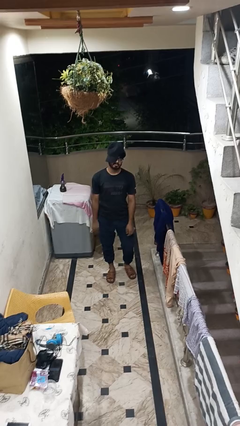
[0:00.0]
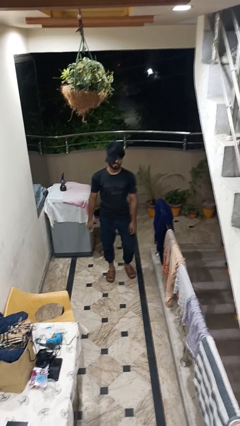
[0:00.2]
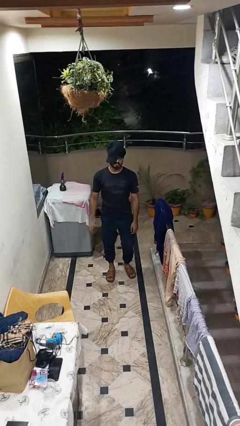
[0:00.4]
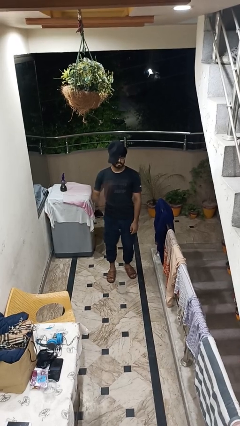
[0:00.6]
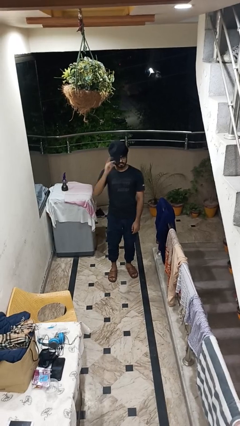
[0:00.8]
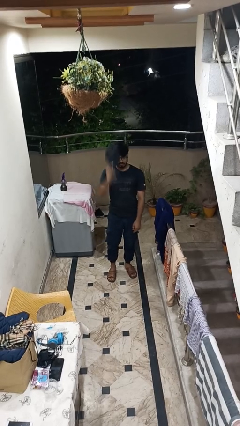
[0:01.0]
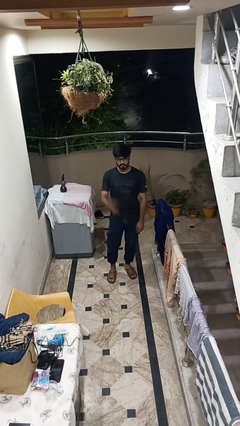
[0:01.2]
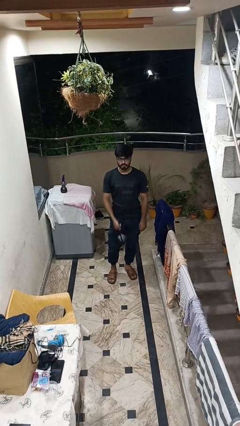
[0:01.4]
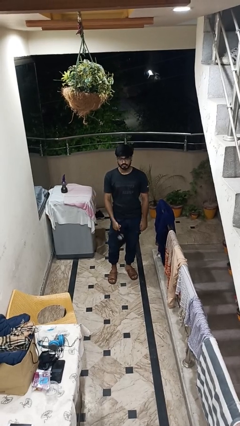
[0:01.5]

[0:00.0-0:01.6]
person takes off hat

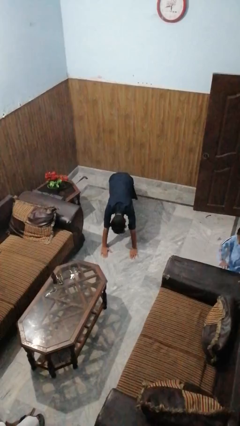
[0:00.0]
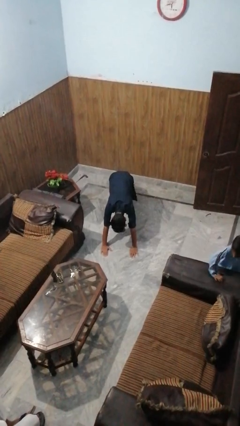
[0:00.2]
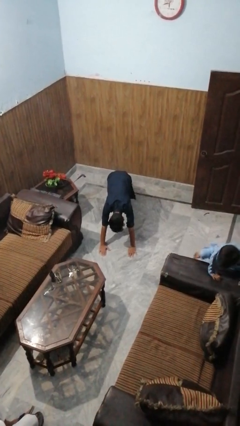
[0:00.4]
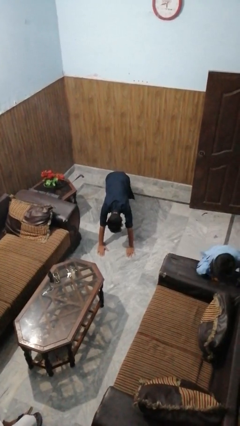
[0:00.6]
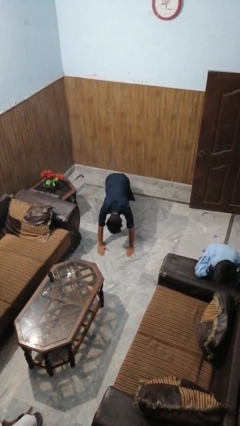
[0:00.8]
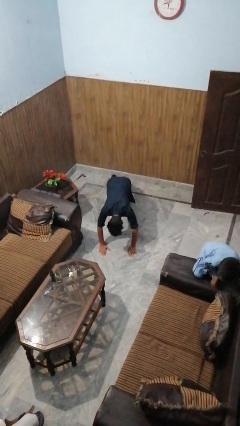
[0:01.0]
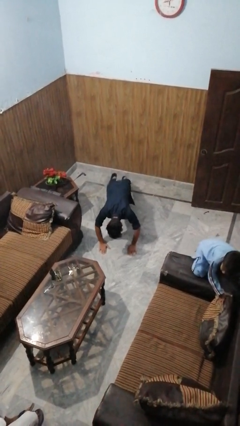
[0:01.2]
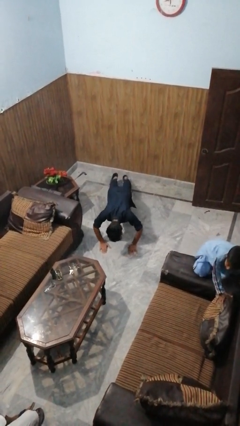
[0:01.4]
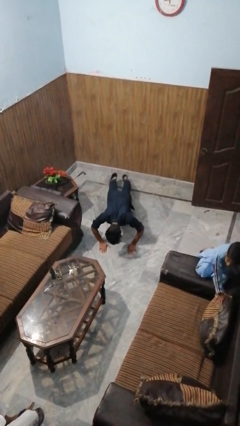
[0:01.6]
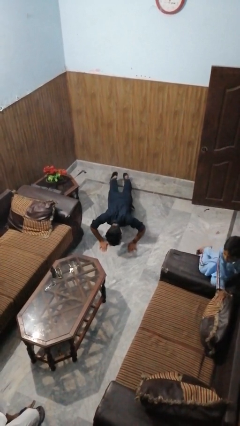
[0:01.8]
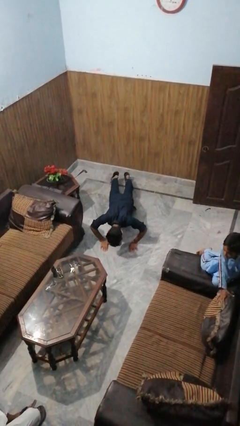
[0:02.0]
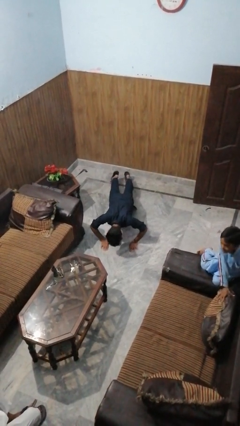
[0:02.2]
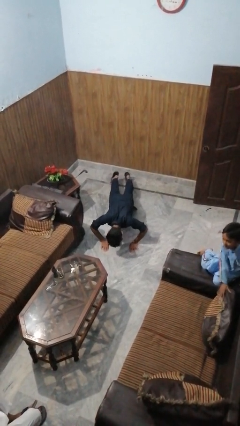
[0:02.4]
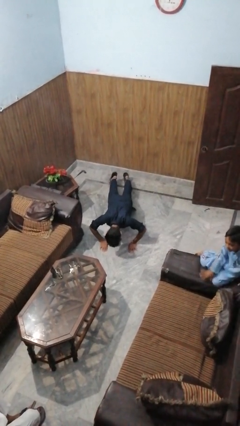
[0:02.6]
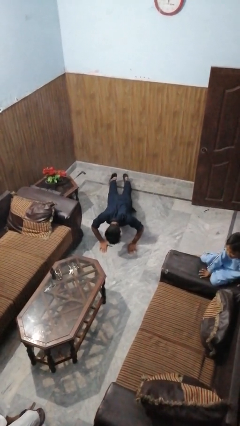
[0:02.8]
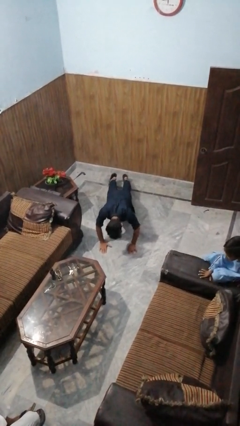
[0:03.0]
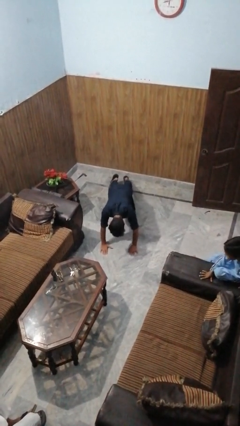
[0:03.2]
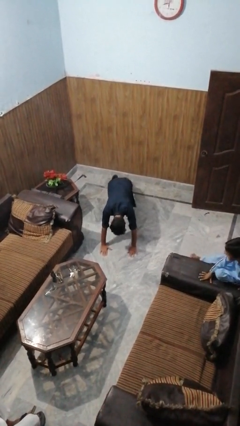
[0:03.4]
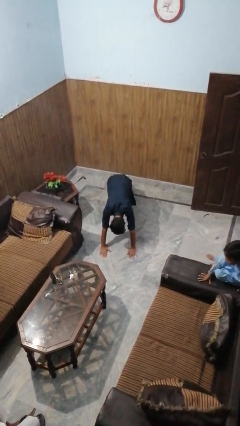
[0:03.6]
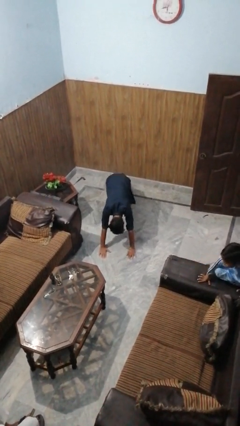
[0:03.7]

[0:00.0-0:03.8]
person exercises with pushup

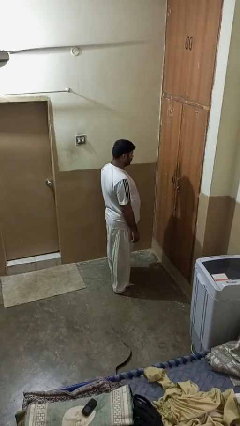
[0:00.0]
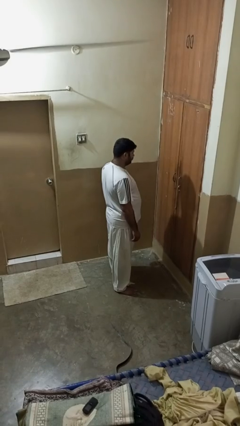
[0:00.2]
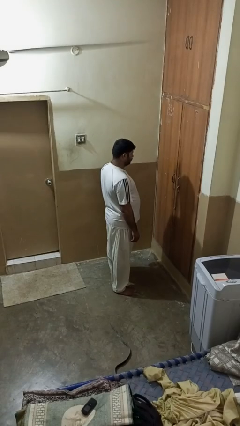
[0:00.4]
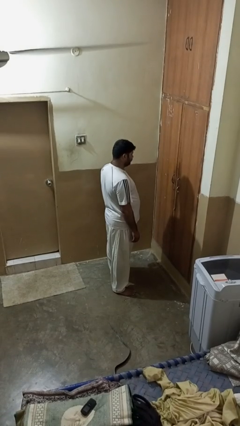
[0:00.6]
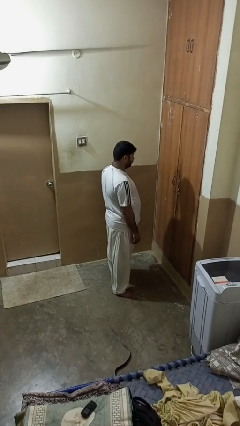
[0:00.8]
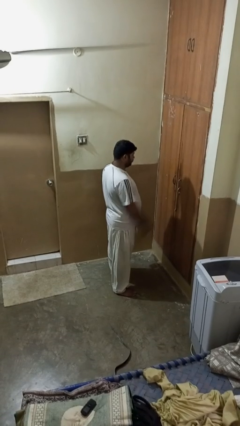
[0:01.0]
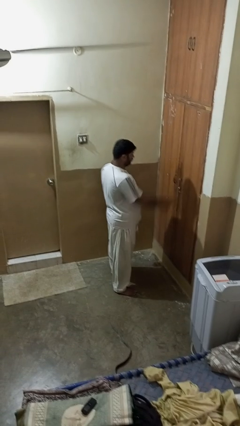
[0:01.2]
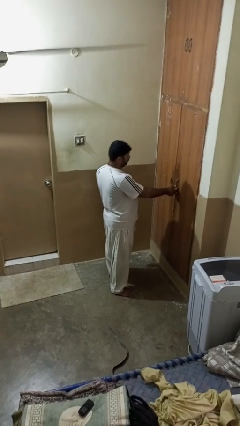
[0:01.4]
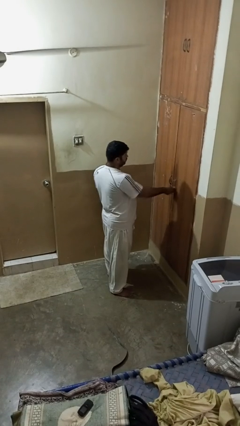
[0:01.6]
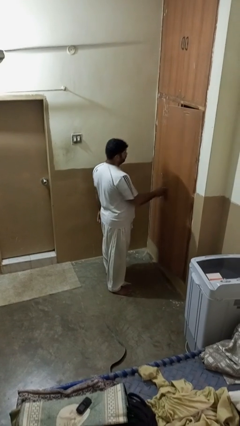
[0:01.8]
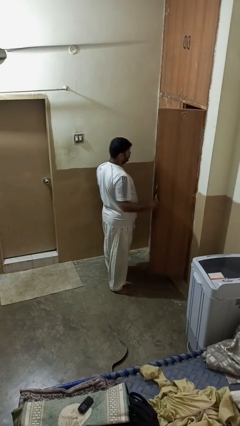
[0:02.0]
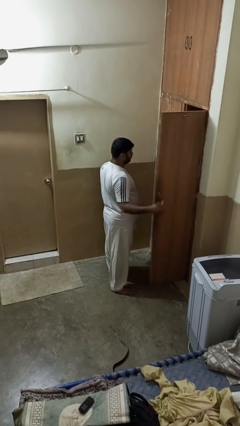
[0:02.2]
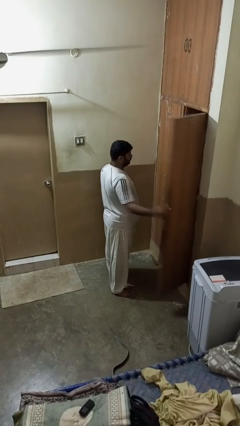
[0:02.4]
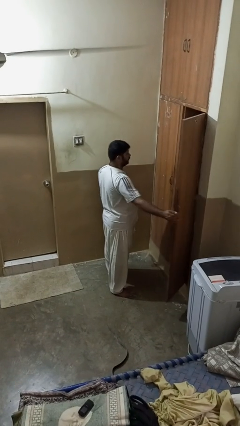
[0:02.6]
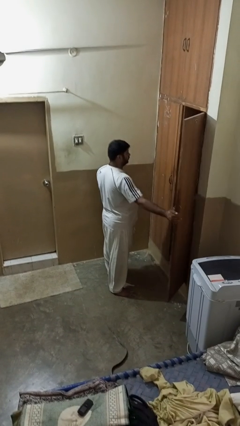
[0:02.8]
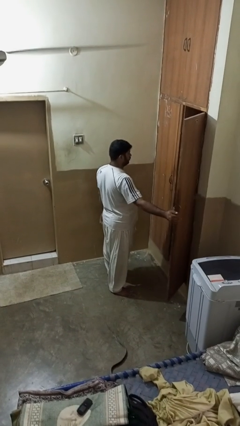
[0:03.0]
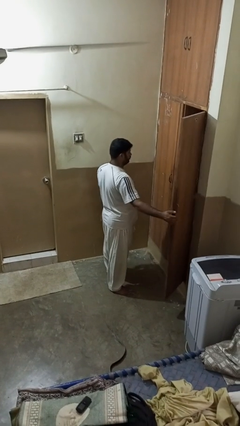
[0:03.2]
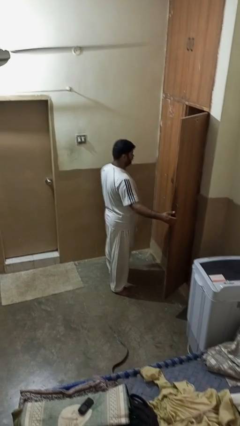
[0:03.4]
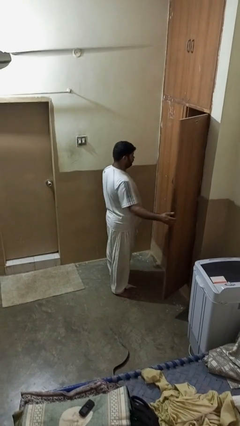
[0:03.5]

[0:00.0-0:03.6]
person opens closet door

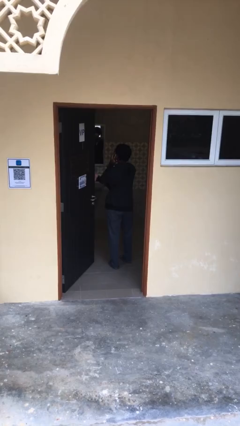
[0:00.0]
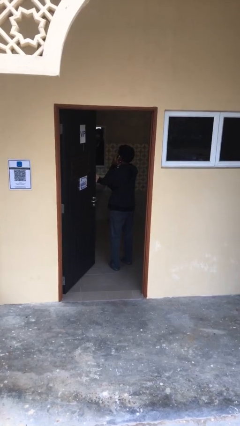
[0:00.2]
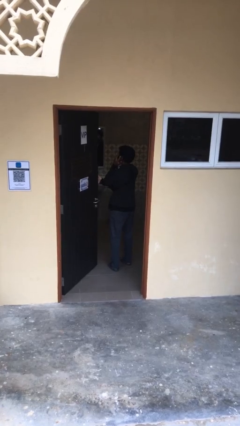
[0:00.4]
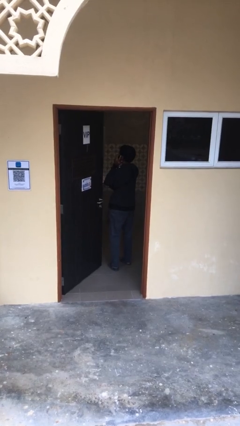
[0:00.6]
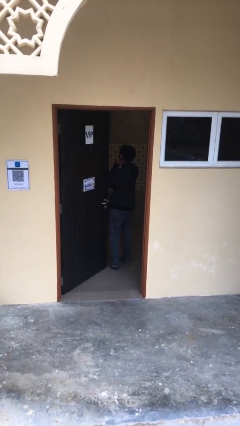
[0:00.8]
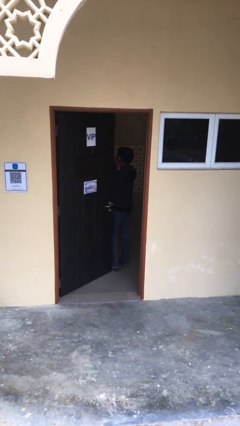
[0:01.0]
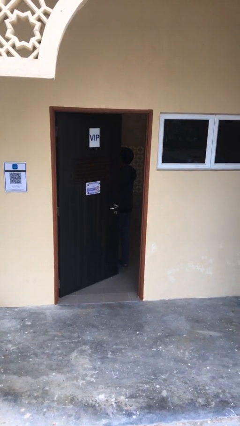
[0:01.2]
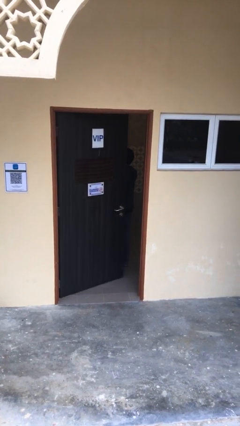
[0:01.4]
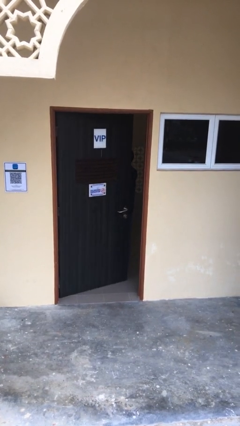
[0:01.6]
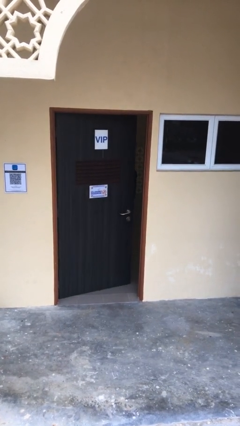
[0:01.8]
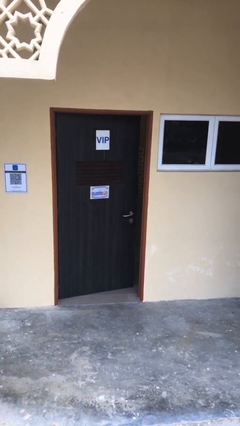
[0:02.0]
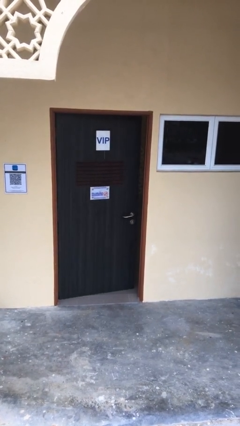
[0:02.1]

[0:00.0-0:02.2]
person closes facility door

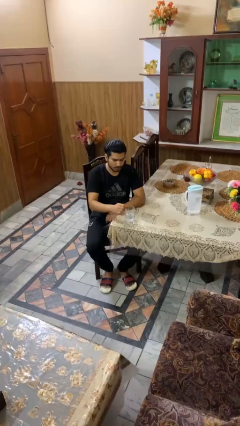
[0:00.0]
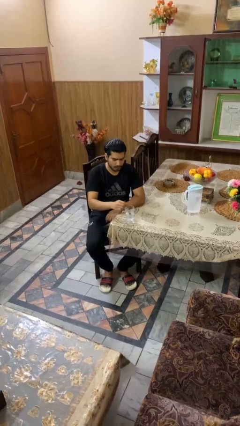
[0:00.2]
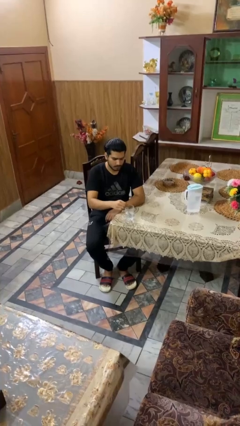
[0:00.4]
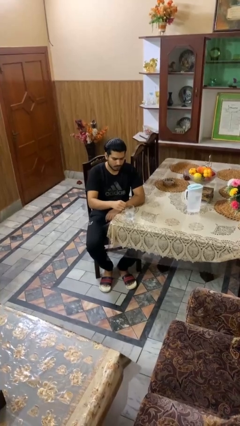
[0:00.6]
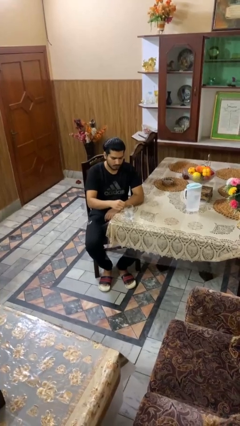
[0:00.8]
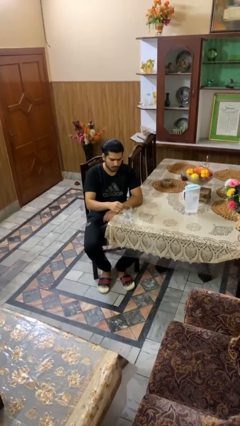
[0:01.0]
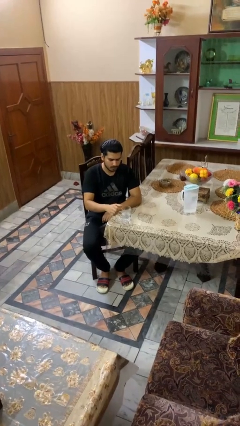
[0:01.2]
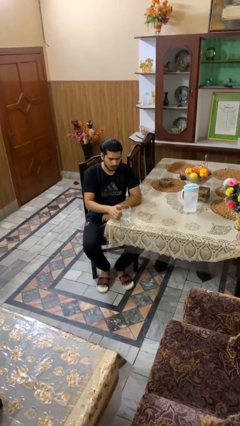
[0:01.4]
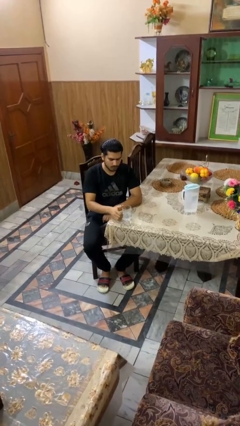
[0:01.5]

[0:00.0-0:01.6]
person stirs mug

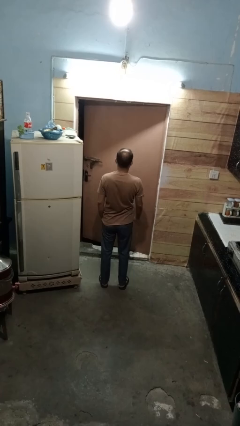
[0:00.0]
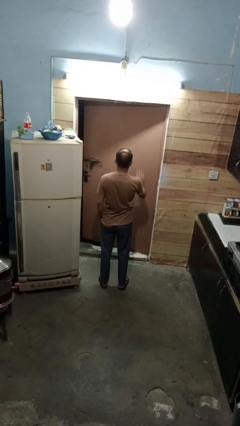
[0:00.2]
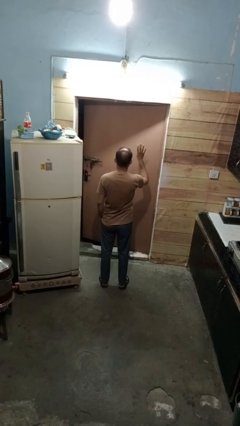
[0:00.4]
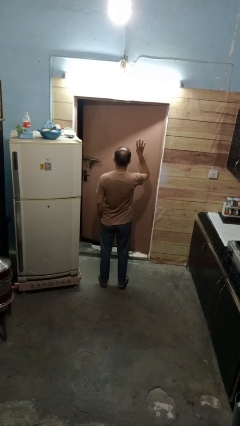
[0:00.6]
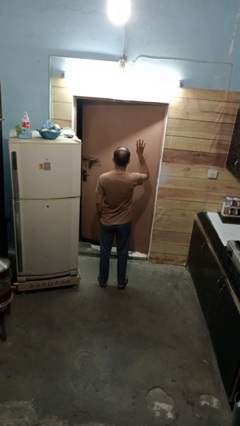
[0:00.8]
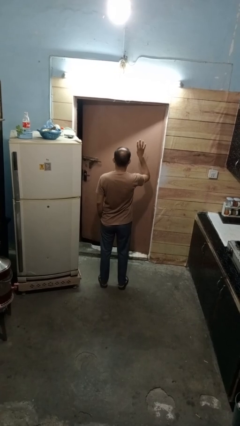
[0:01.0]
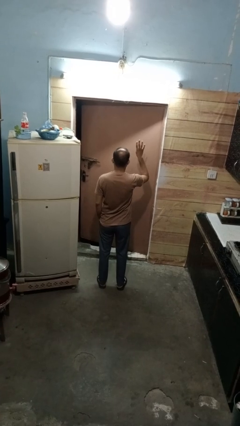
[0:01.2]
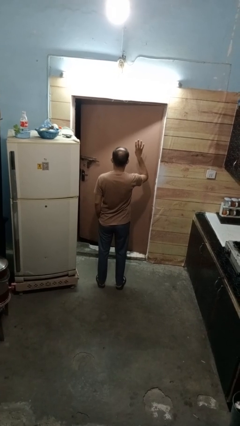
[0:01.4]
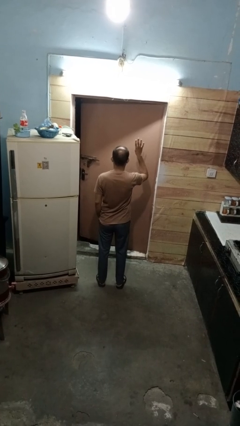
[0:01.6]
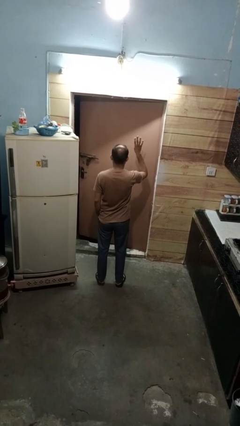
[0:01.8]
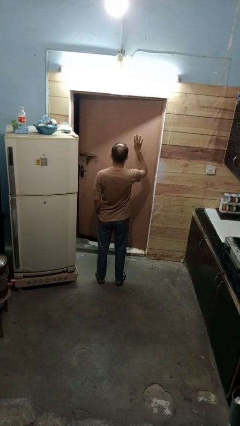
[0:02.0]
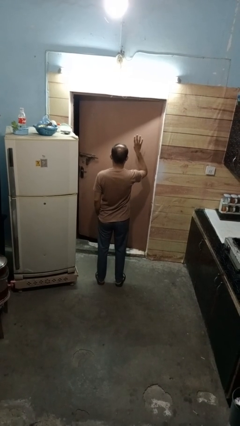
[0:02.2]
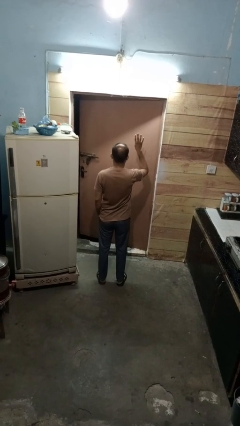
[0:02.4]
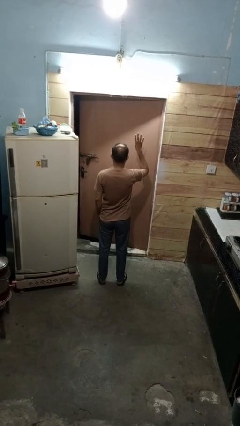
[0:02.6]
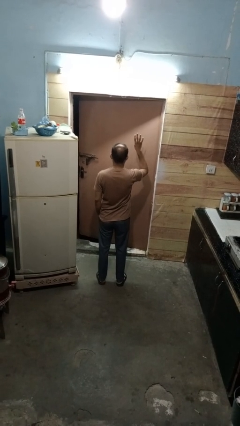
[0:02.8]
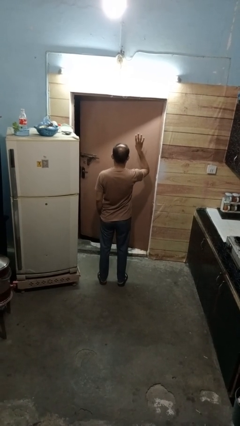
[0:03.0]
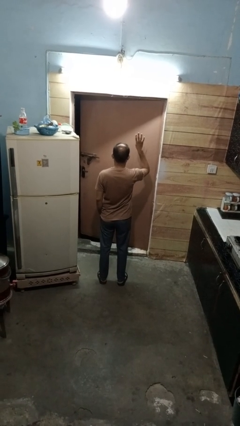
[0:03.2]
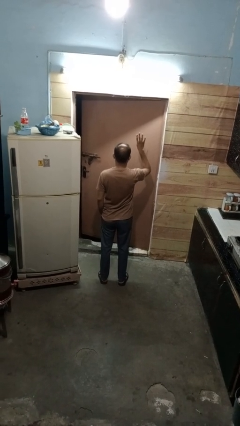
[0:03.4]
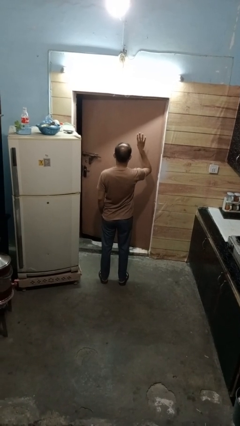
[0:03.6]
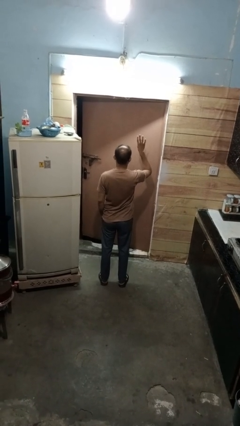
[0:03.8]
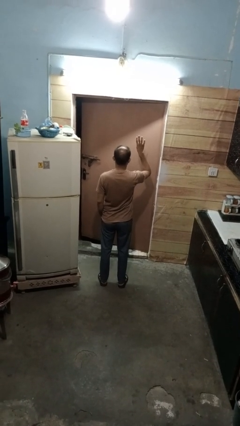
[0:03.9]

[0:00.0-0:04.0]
person gestures number four

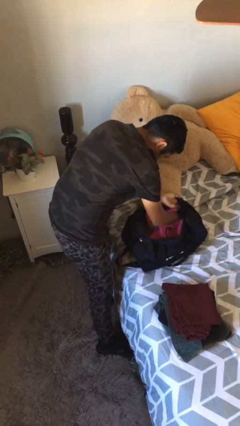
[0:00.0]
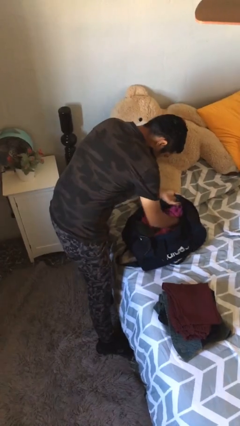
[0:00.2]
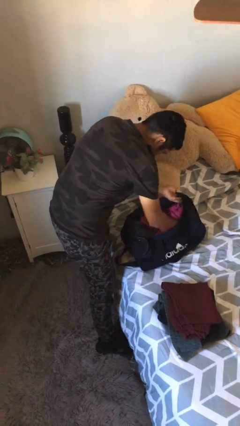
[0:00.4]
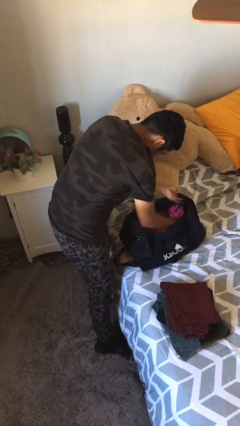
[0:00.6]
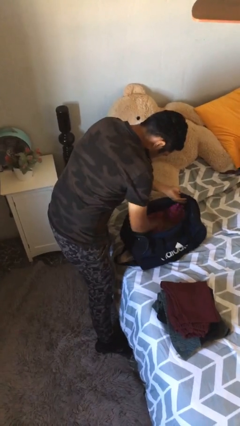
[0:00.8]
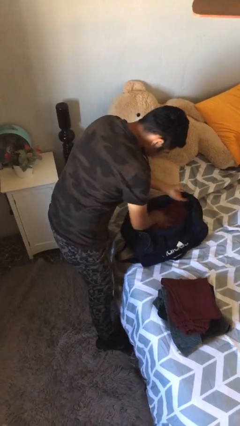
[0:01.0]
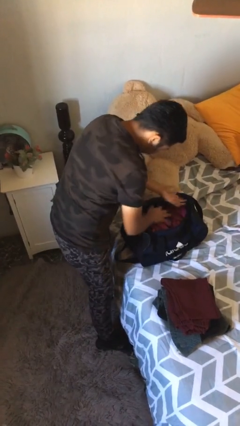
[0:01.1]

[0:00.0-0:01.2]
person loads clothes into suitcase
